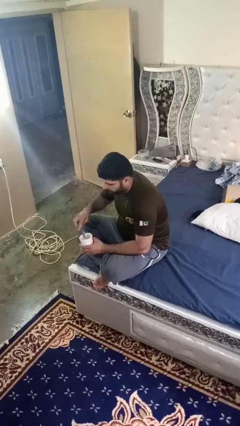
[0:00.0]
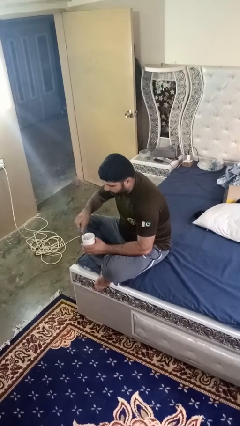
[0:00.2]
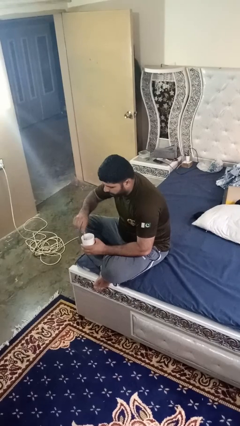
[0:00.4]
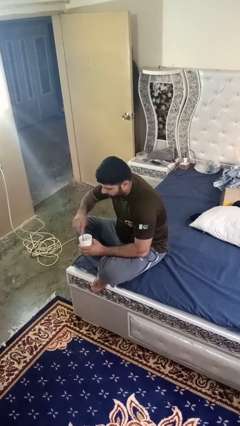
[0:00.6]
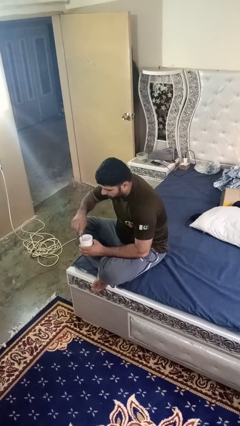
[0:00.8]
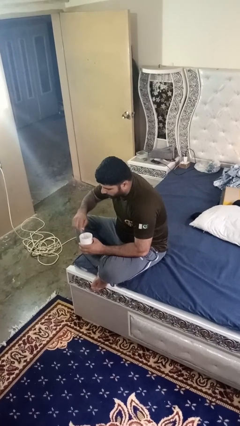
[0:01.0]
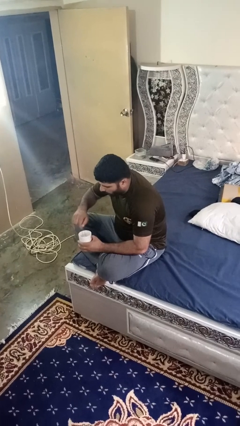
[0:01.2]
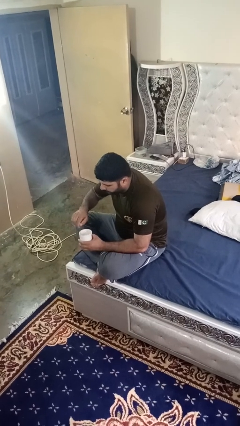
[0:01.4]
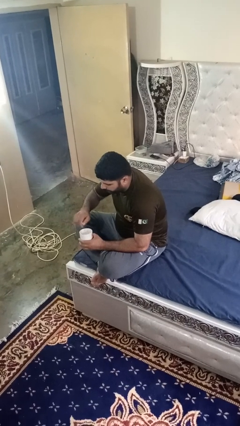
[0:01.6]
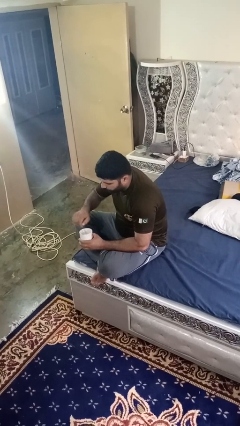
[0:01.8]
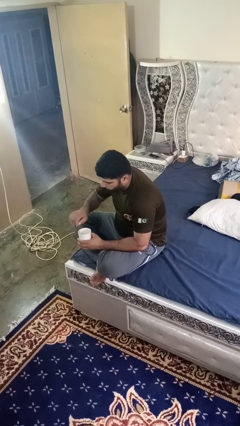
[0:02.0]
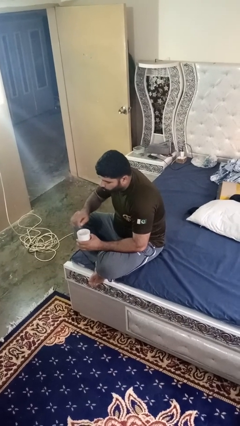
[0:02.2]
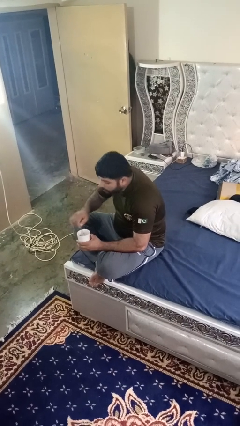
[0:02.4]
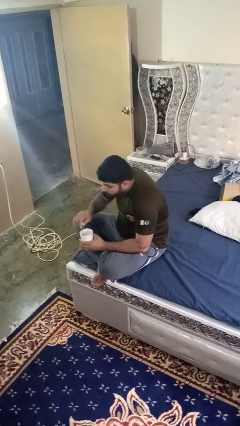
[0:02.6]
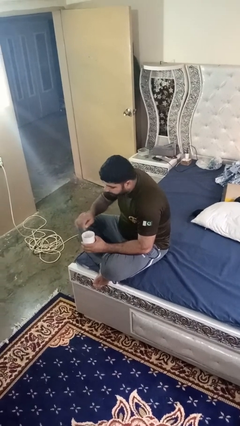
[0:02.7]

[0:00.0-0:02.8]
person stirs mug

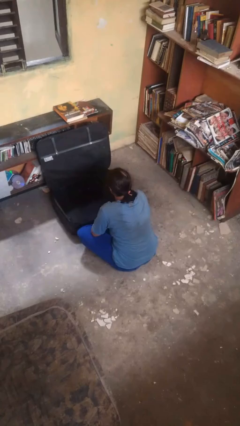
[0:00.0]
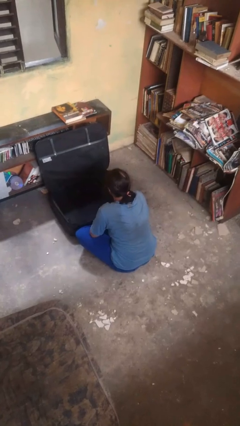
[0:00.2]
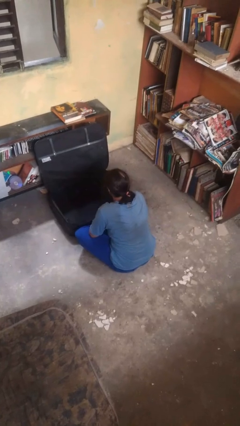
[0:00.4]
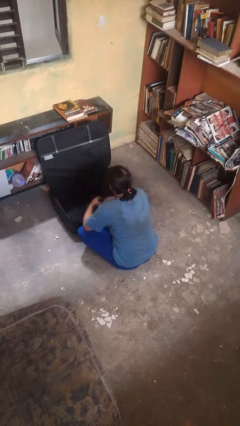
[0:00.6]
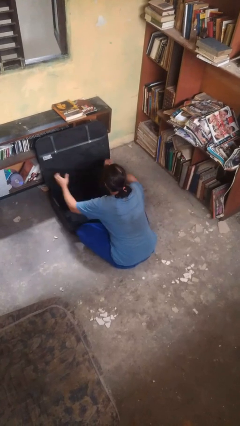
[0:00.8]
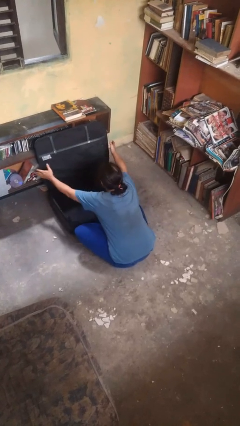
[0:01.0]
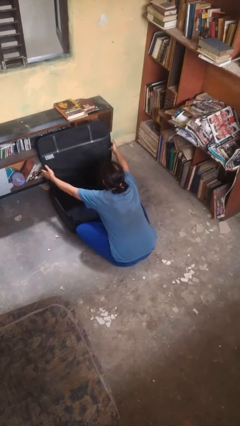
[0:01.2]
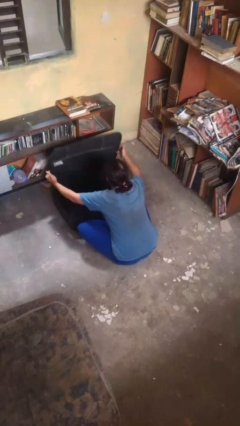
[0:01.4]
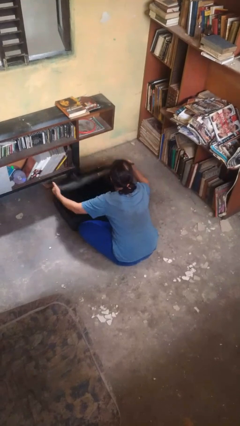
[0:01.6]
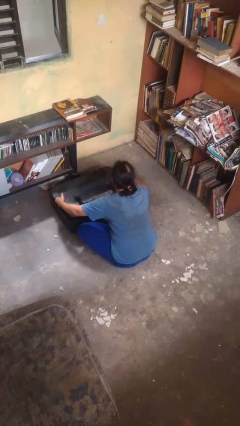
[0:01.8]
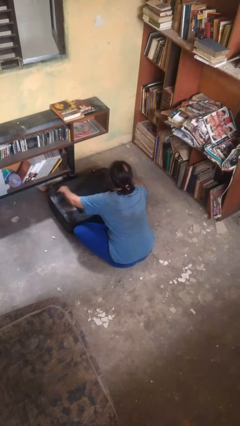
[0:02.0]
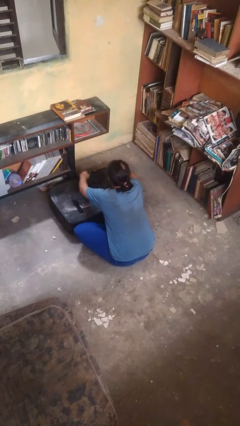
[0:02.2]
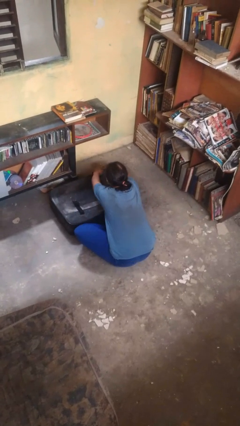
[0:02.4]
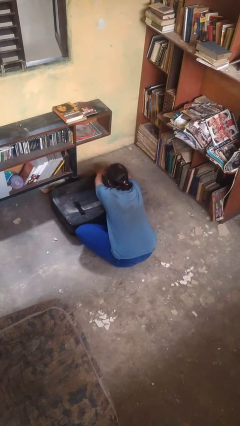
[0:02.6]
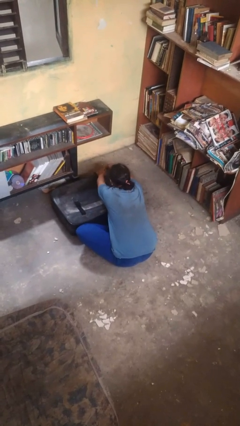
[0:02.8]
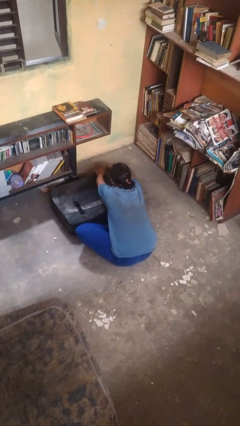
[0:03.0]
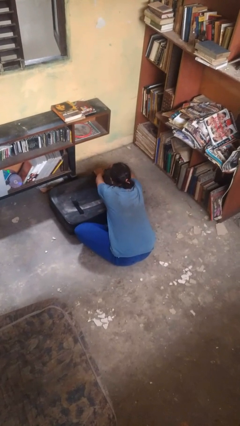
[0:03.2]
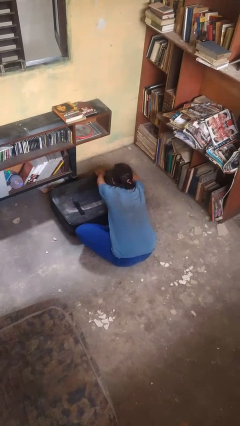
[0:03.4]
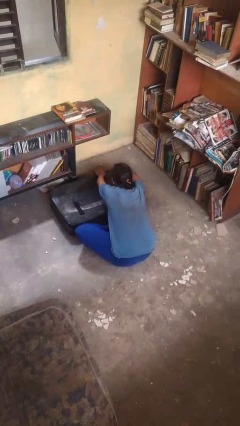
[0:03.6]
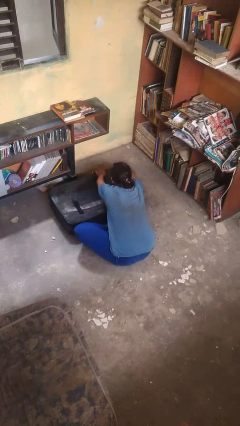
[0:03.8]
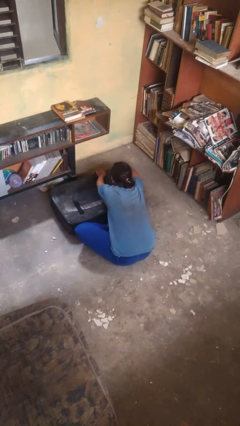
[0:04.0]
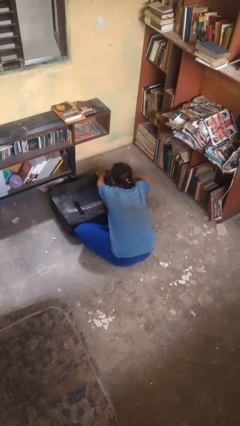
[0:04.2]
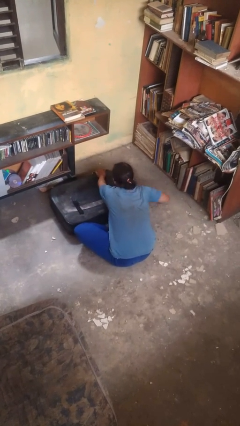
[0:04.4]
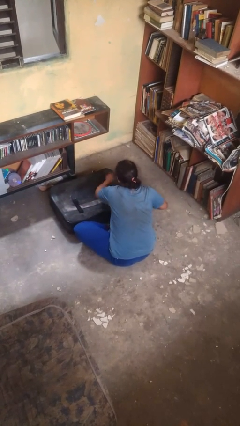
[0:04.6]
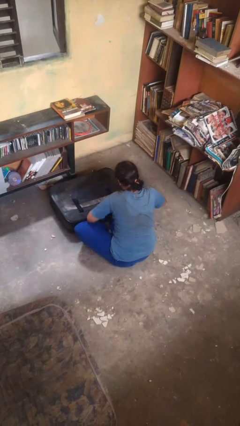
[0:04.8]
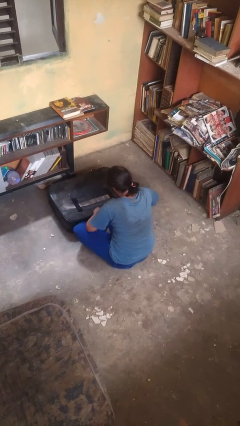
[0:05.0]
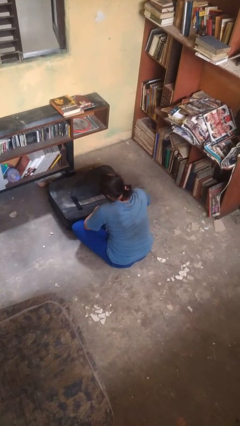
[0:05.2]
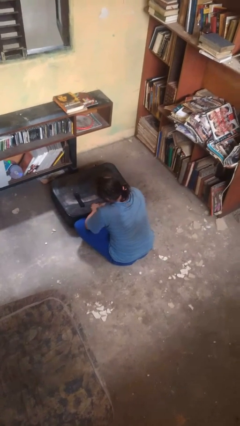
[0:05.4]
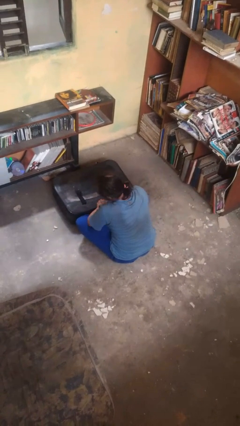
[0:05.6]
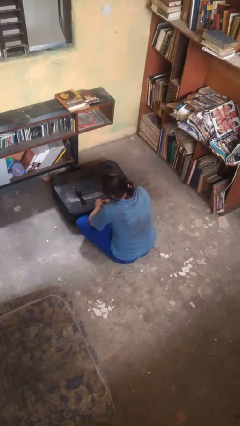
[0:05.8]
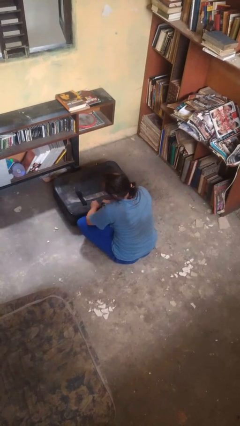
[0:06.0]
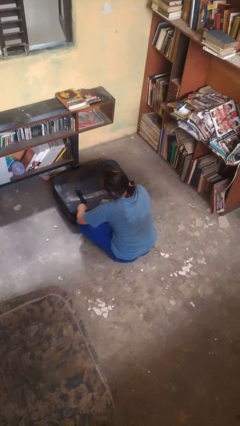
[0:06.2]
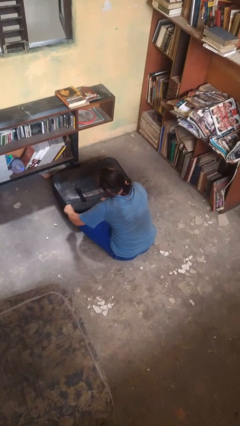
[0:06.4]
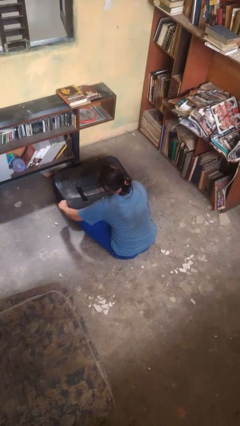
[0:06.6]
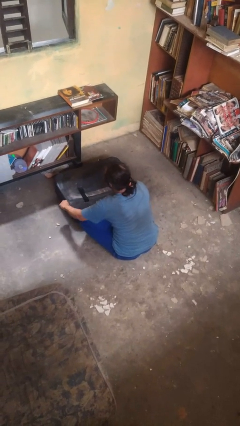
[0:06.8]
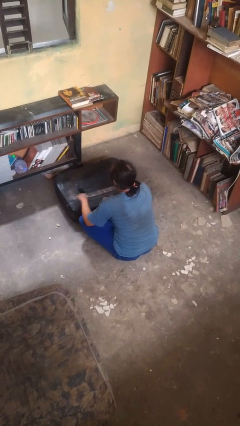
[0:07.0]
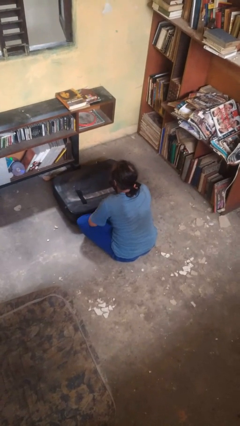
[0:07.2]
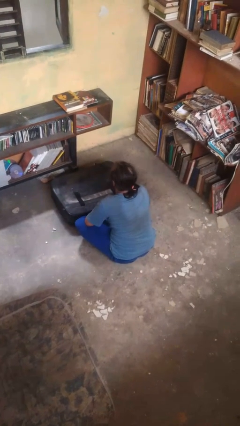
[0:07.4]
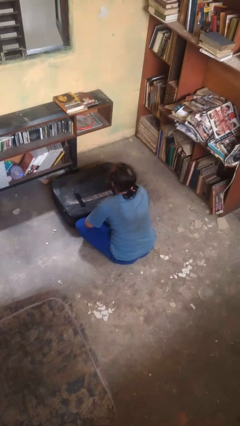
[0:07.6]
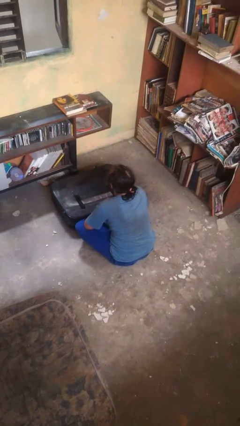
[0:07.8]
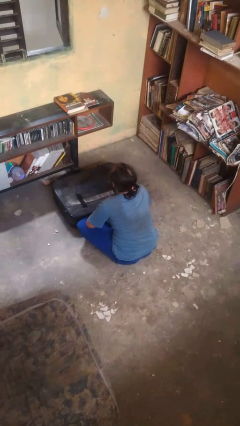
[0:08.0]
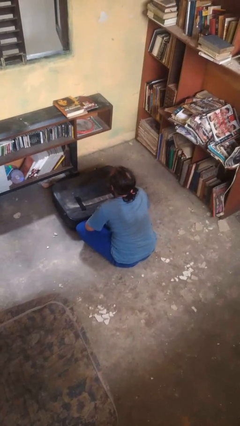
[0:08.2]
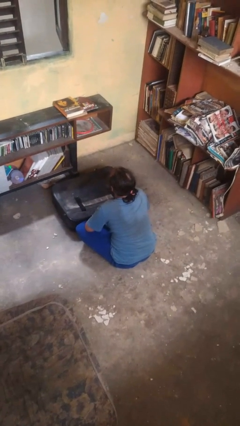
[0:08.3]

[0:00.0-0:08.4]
person closes suitcase

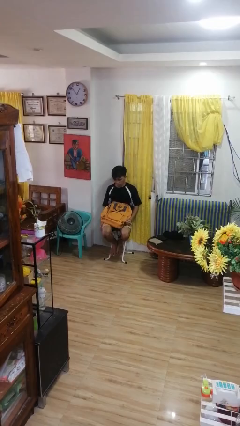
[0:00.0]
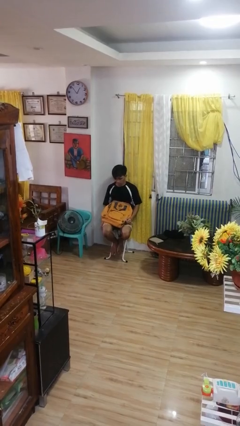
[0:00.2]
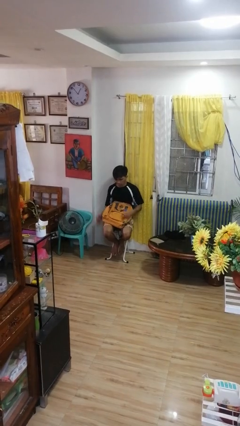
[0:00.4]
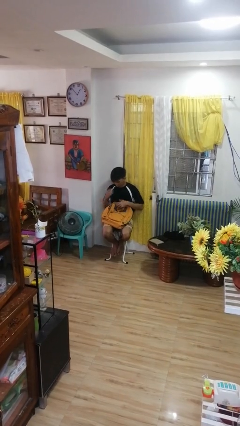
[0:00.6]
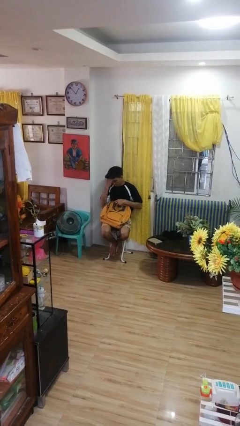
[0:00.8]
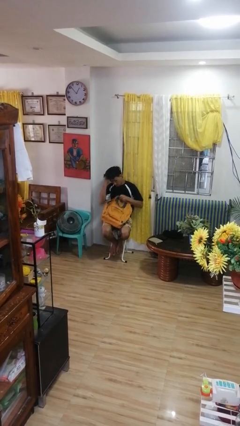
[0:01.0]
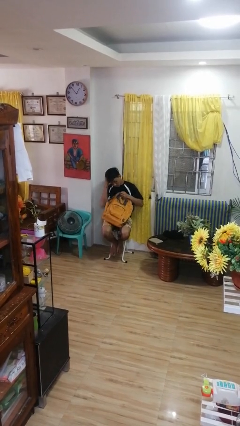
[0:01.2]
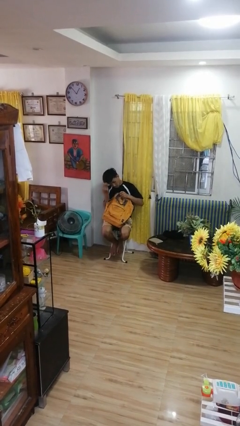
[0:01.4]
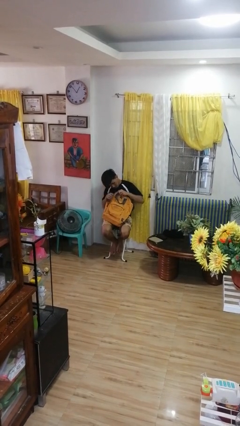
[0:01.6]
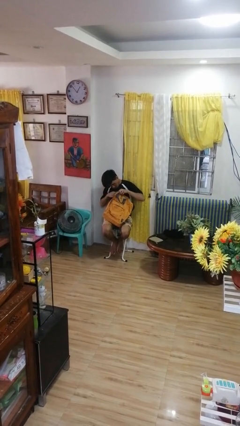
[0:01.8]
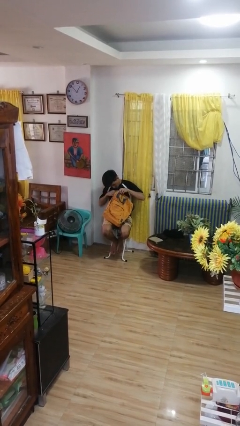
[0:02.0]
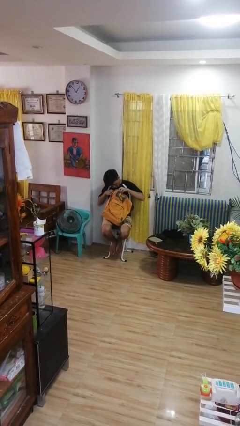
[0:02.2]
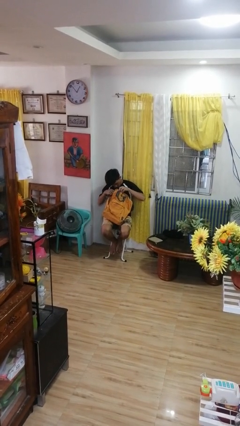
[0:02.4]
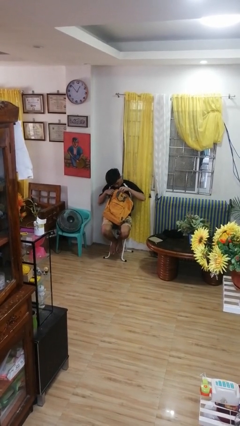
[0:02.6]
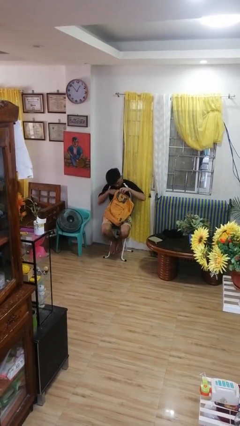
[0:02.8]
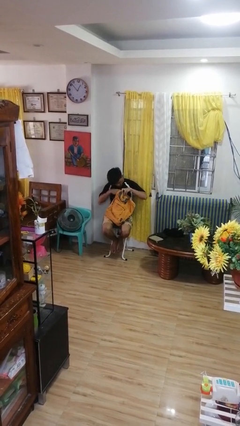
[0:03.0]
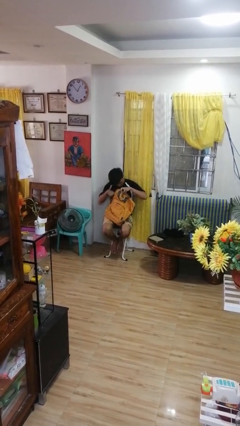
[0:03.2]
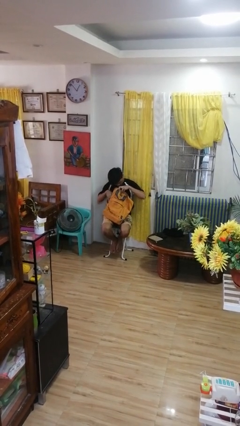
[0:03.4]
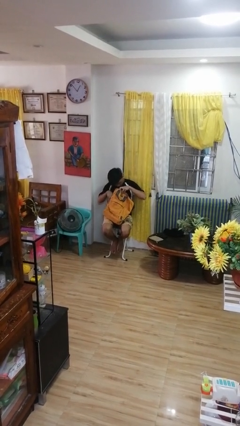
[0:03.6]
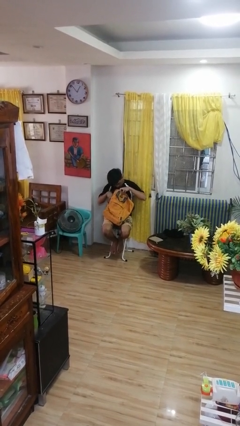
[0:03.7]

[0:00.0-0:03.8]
person searches in backpack

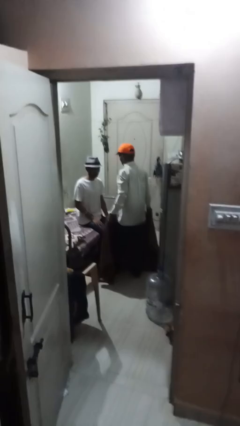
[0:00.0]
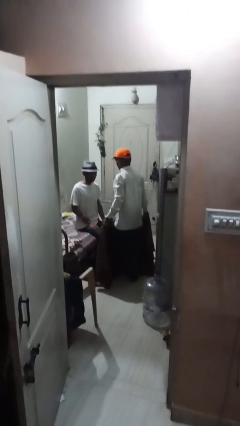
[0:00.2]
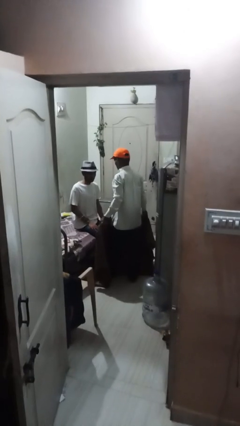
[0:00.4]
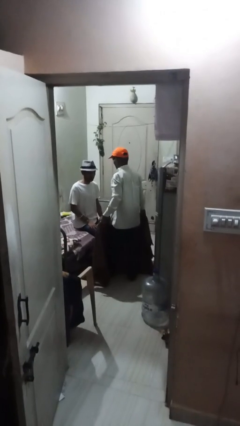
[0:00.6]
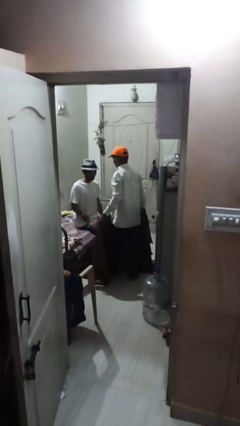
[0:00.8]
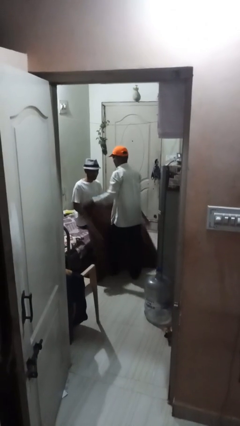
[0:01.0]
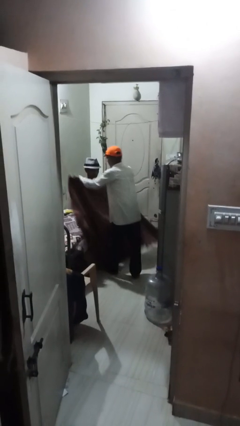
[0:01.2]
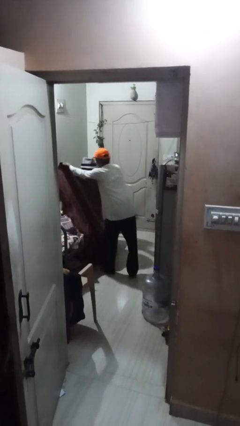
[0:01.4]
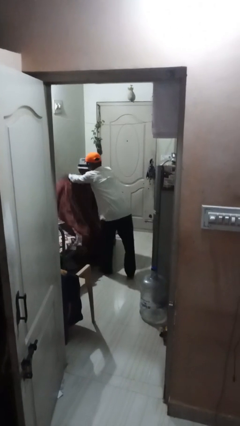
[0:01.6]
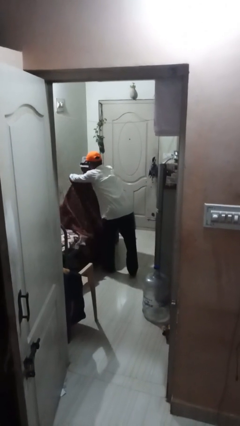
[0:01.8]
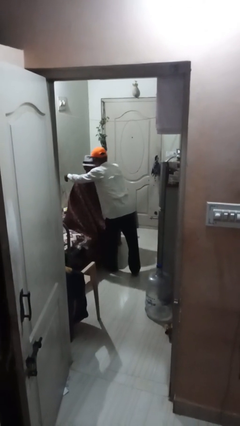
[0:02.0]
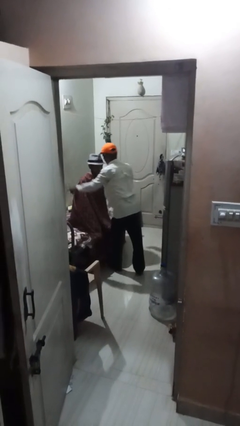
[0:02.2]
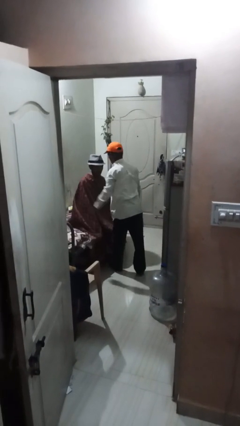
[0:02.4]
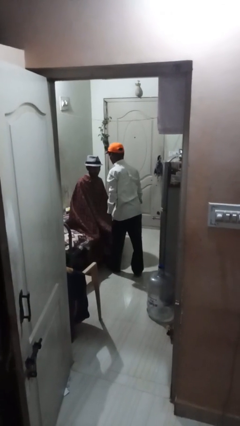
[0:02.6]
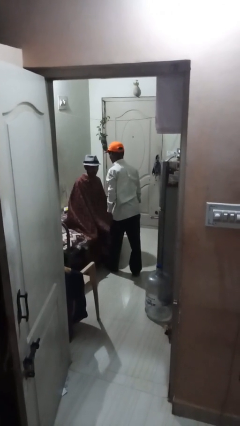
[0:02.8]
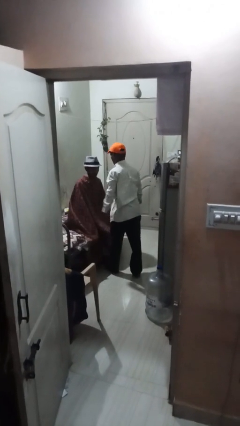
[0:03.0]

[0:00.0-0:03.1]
person covers friend with blanket
